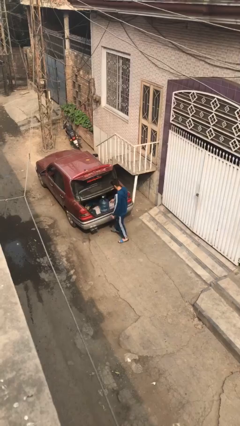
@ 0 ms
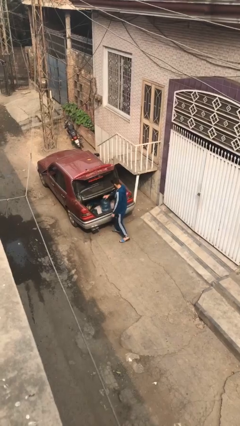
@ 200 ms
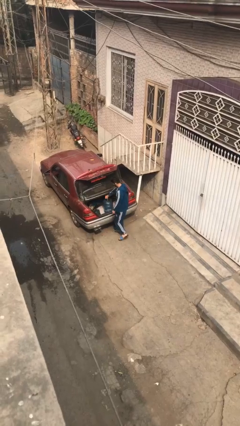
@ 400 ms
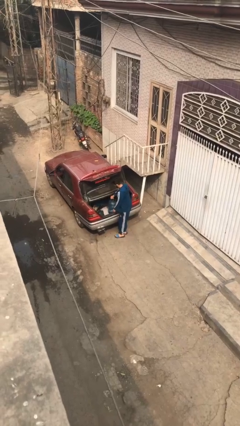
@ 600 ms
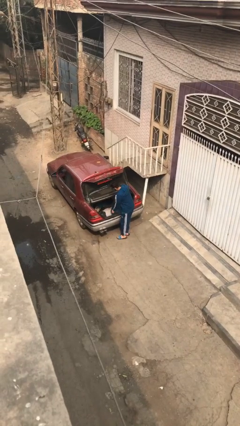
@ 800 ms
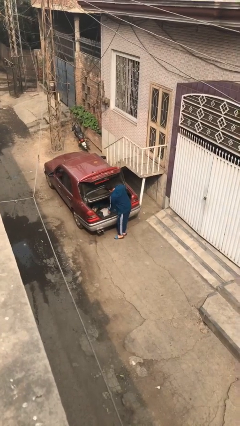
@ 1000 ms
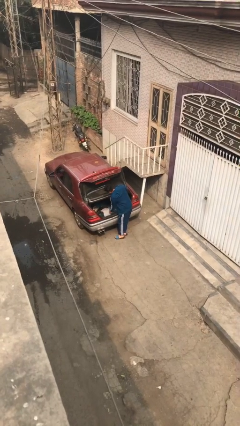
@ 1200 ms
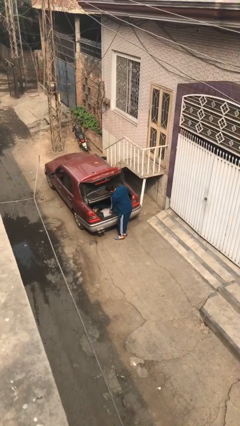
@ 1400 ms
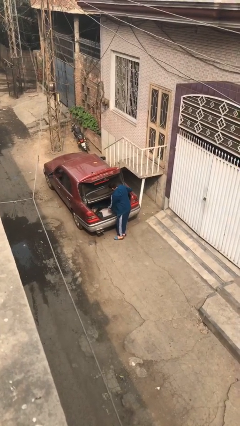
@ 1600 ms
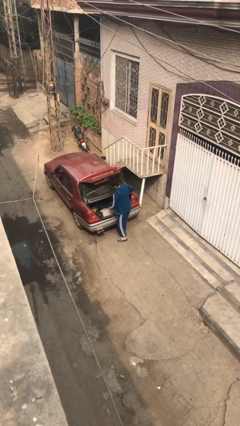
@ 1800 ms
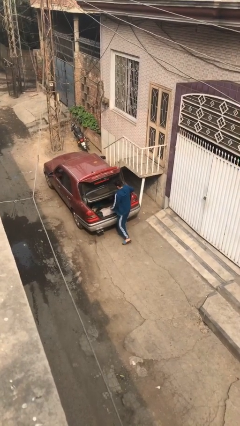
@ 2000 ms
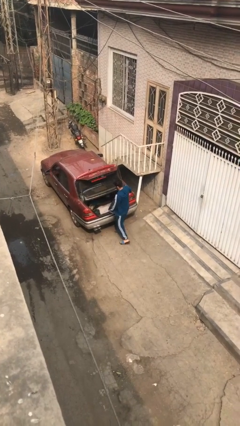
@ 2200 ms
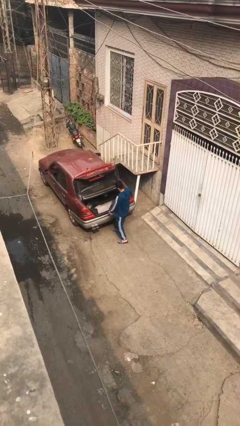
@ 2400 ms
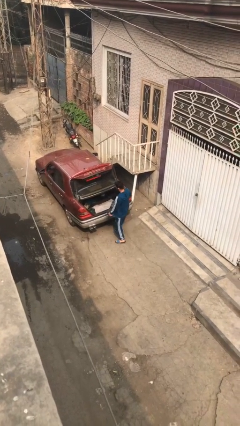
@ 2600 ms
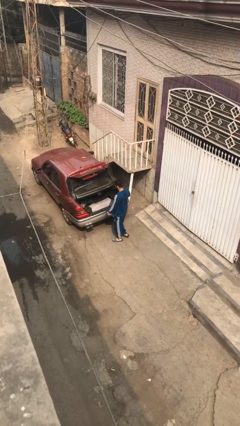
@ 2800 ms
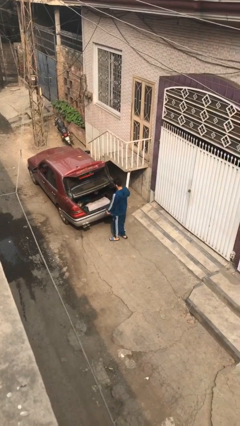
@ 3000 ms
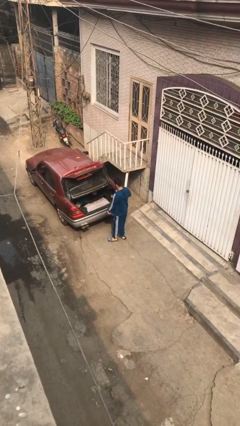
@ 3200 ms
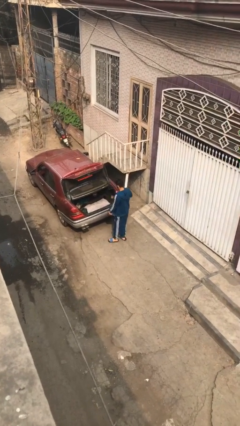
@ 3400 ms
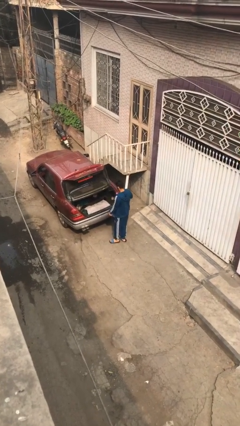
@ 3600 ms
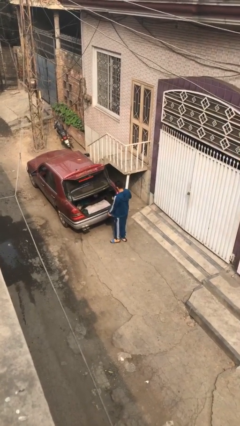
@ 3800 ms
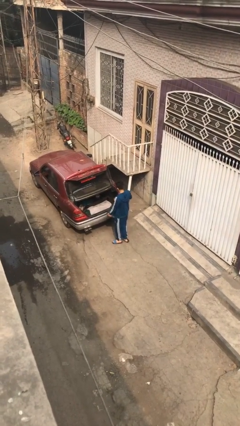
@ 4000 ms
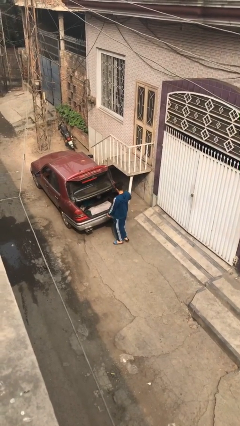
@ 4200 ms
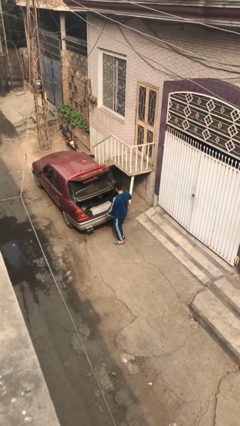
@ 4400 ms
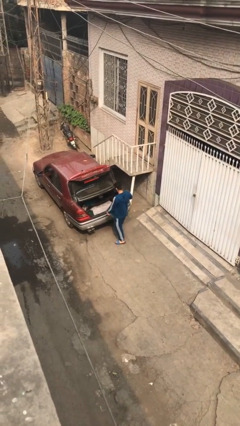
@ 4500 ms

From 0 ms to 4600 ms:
person unloads car

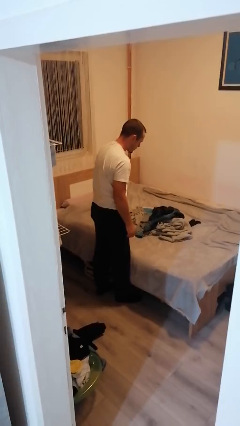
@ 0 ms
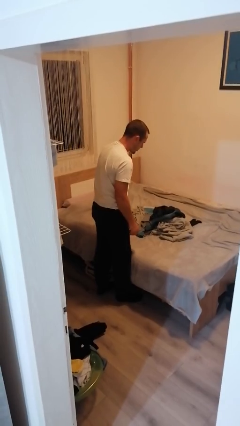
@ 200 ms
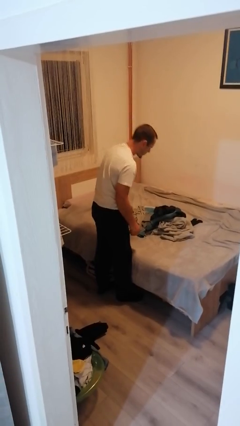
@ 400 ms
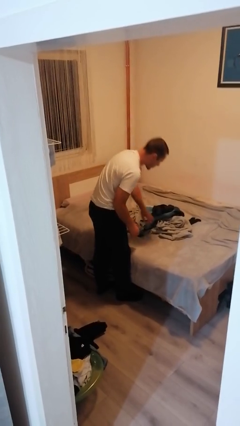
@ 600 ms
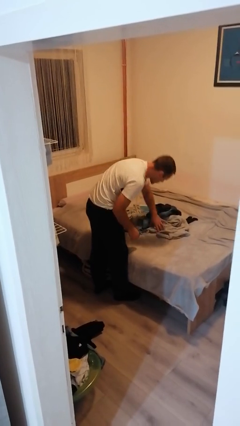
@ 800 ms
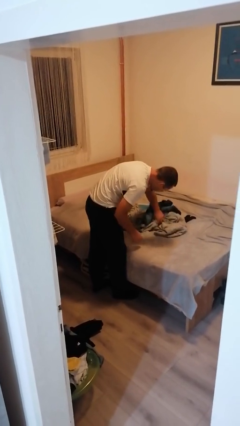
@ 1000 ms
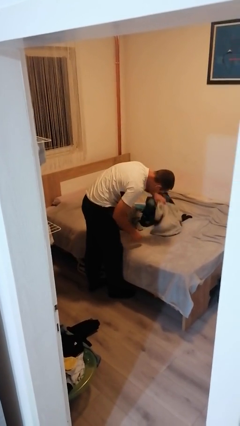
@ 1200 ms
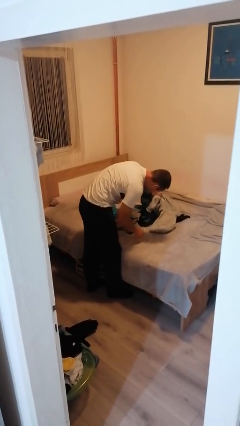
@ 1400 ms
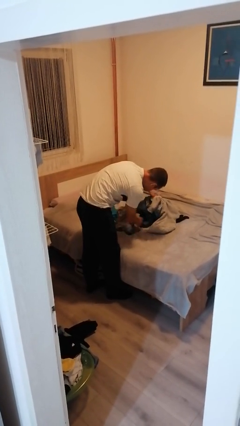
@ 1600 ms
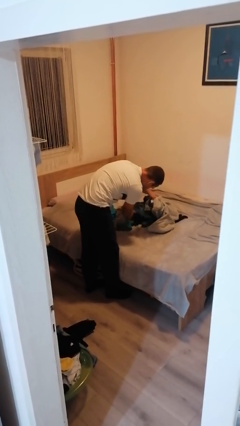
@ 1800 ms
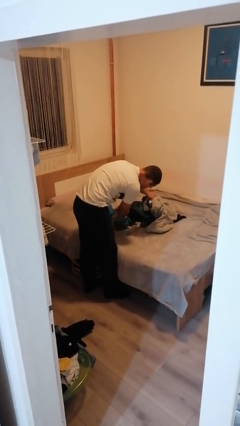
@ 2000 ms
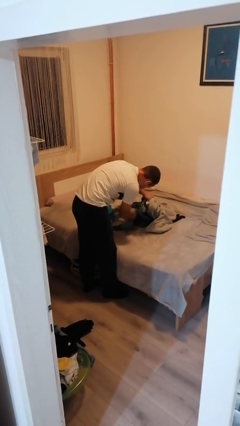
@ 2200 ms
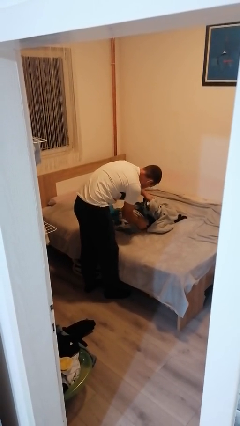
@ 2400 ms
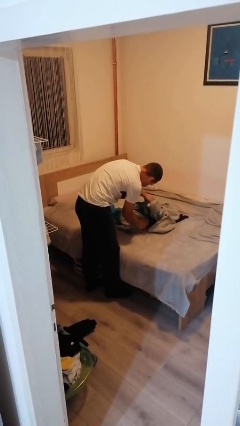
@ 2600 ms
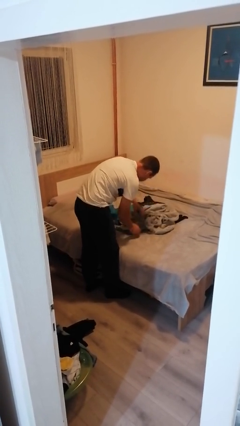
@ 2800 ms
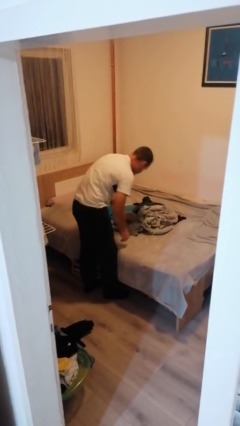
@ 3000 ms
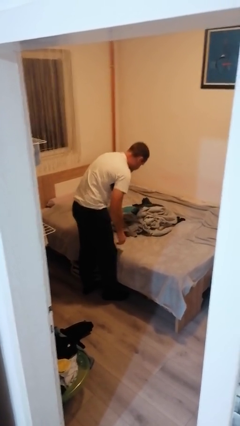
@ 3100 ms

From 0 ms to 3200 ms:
person searches under bed

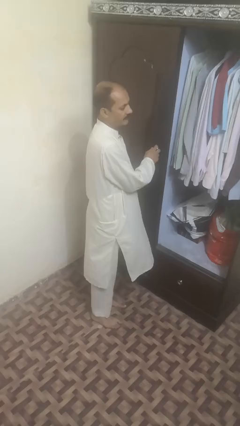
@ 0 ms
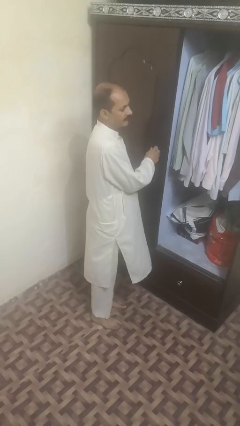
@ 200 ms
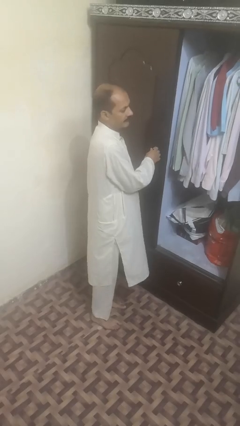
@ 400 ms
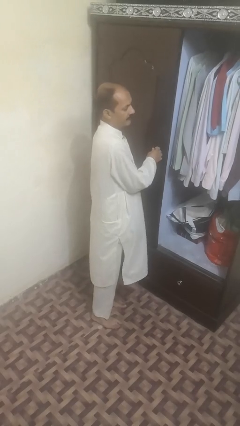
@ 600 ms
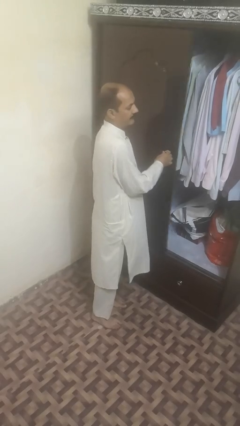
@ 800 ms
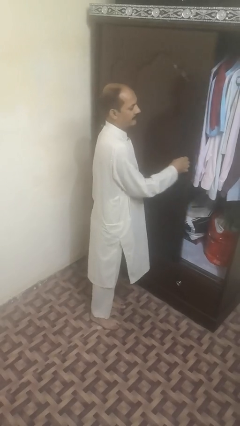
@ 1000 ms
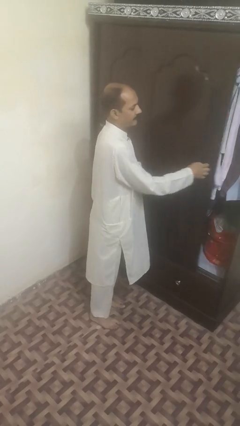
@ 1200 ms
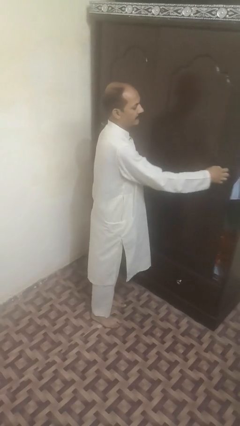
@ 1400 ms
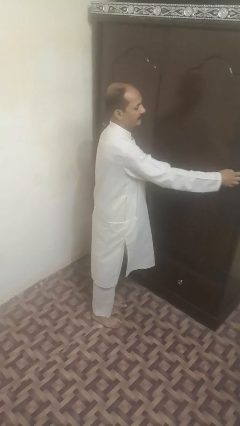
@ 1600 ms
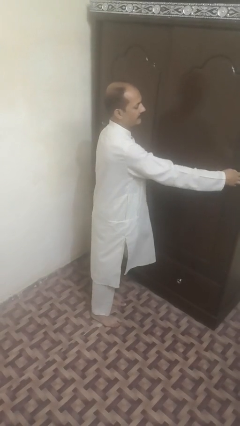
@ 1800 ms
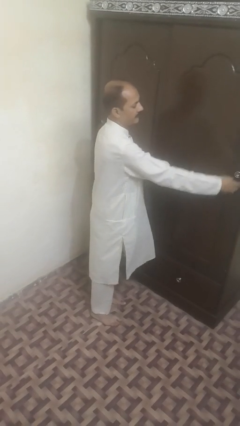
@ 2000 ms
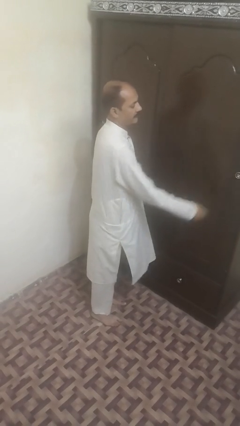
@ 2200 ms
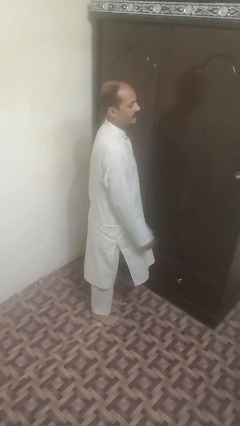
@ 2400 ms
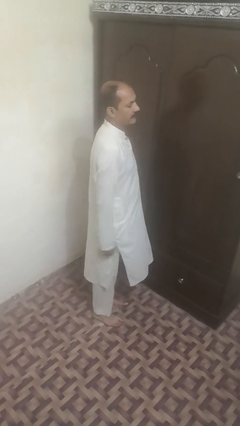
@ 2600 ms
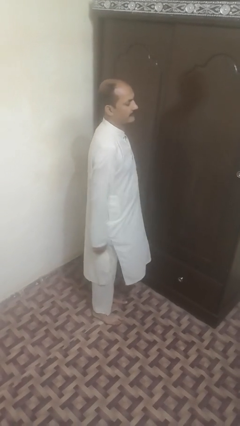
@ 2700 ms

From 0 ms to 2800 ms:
person closes sliding door

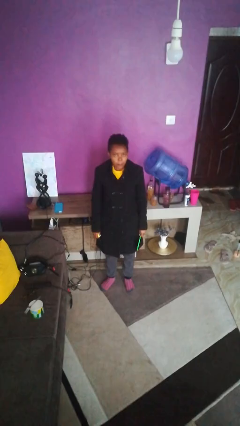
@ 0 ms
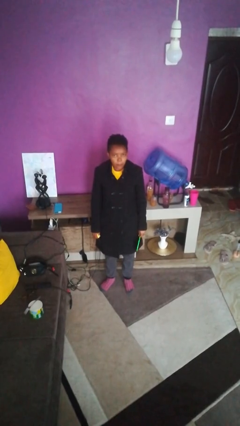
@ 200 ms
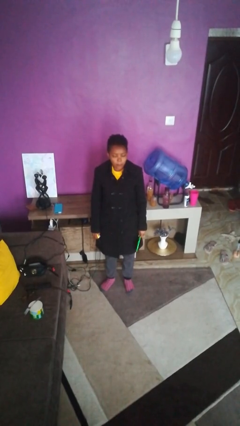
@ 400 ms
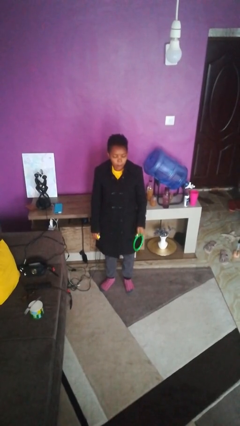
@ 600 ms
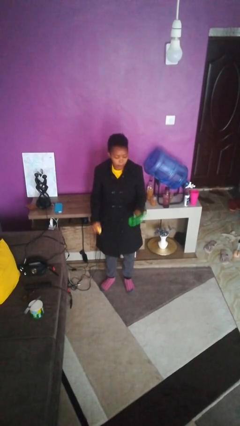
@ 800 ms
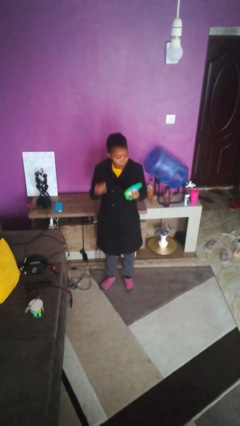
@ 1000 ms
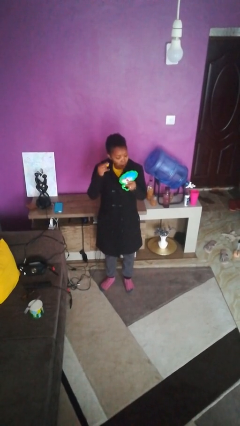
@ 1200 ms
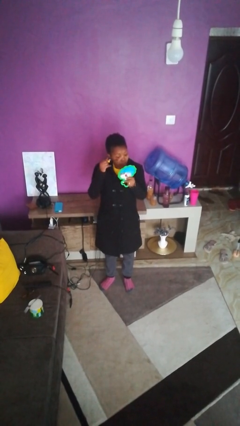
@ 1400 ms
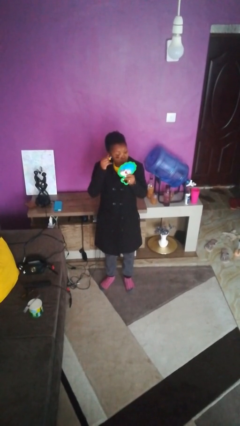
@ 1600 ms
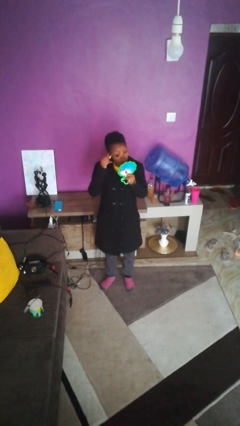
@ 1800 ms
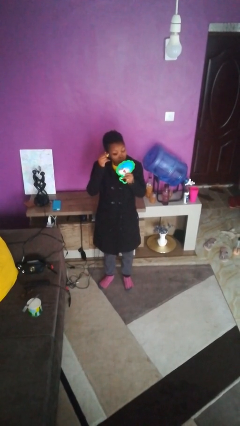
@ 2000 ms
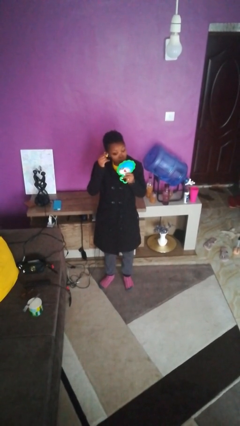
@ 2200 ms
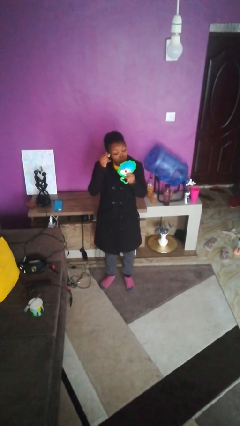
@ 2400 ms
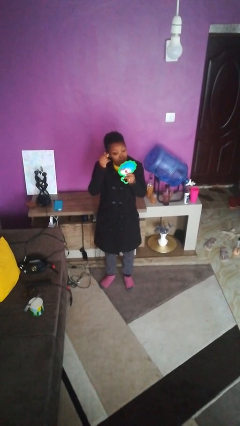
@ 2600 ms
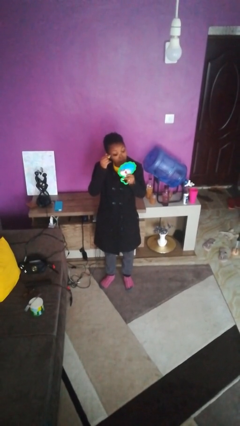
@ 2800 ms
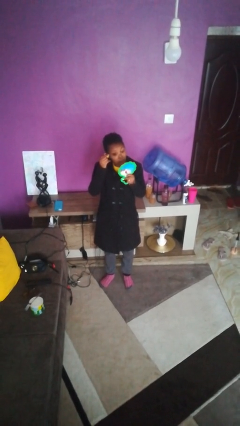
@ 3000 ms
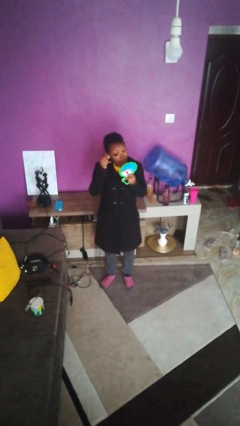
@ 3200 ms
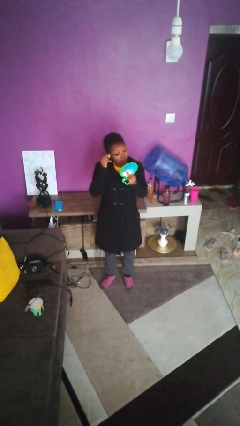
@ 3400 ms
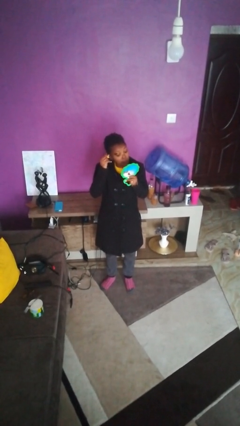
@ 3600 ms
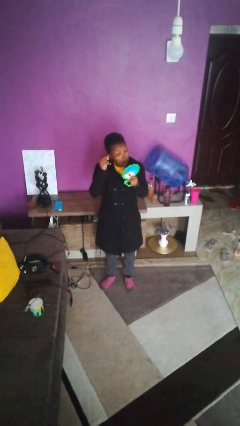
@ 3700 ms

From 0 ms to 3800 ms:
person applies eye makeup

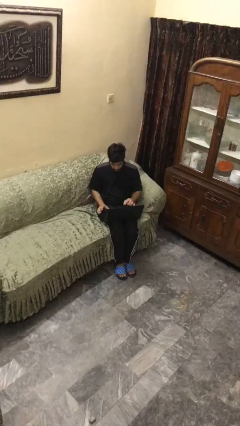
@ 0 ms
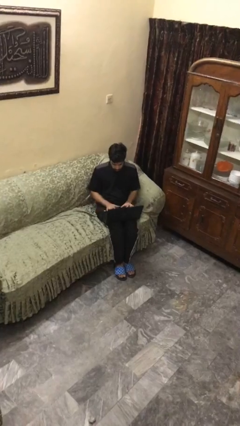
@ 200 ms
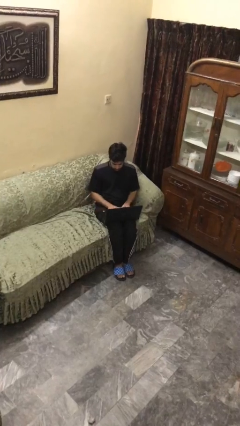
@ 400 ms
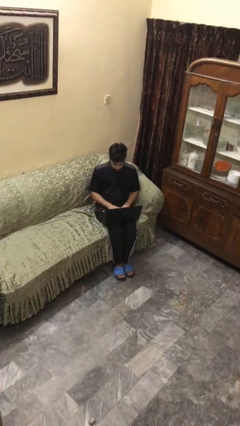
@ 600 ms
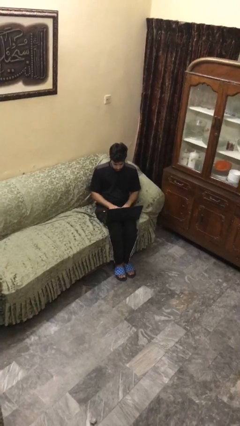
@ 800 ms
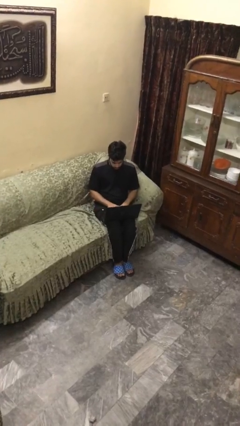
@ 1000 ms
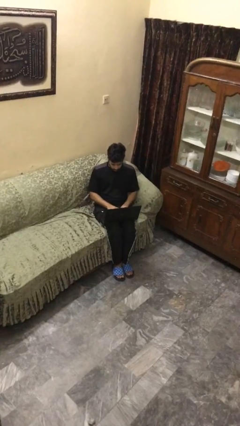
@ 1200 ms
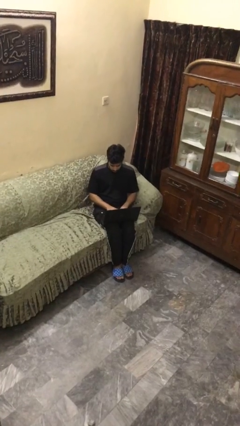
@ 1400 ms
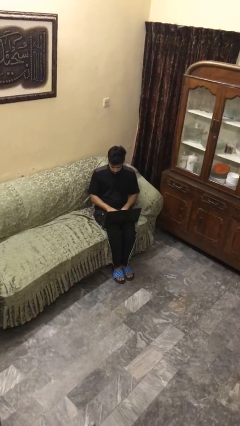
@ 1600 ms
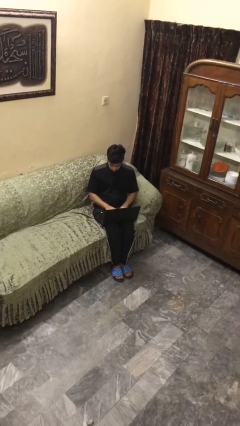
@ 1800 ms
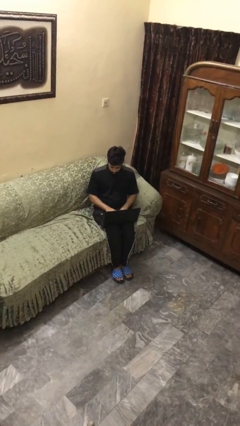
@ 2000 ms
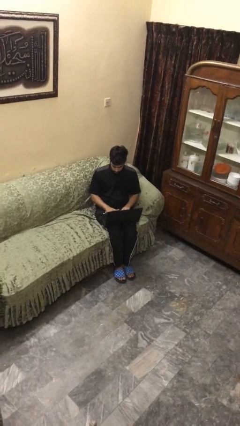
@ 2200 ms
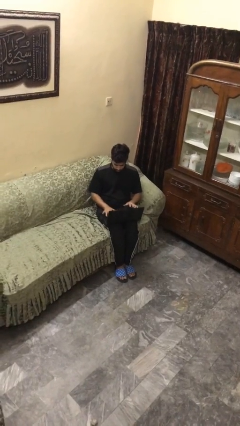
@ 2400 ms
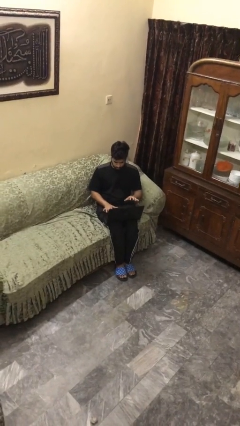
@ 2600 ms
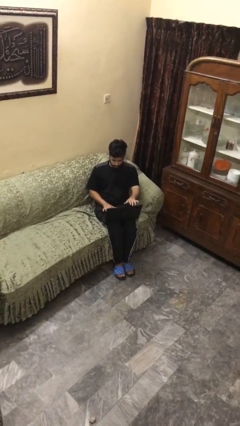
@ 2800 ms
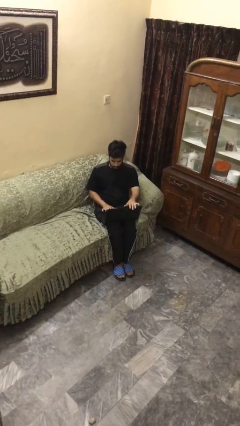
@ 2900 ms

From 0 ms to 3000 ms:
person interacts with laptop
